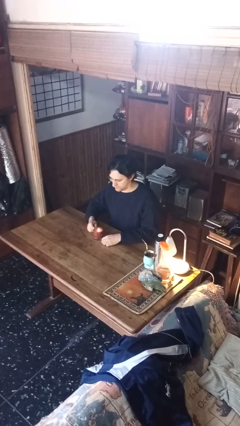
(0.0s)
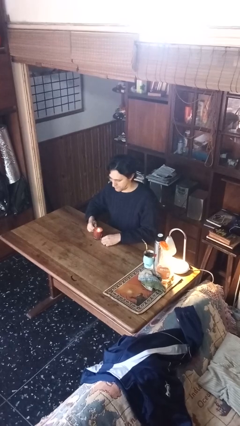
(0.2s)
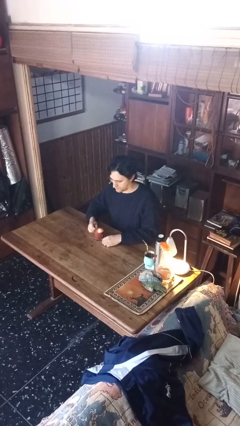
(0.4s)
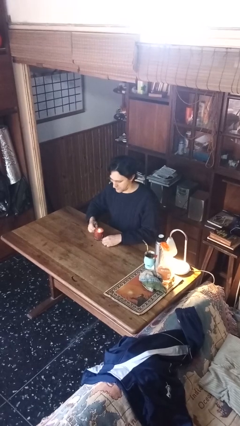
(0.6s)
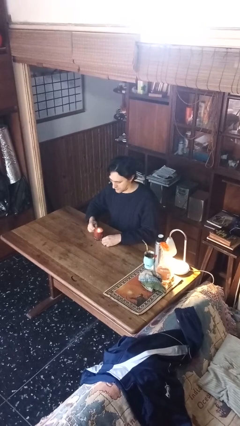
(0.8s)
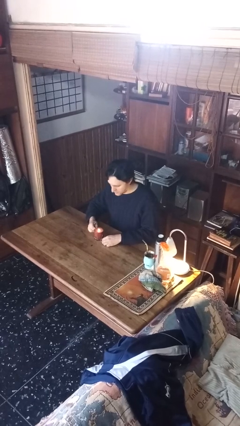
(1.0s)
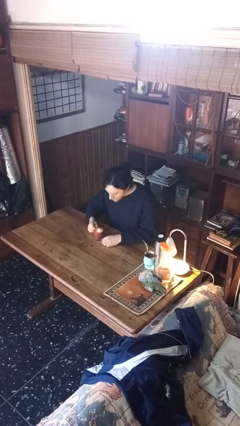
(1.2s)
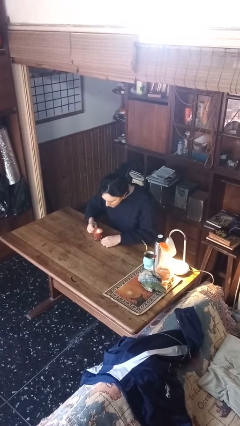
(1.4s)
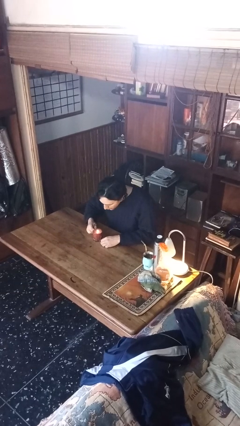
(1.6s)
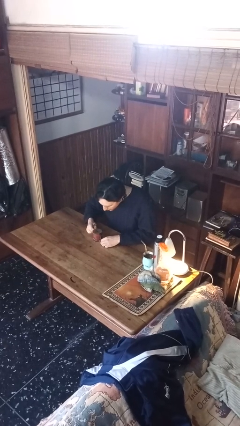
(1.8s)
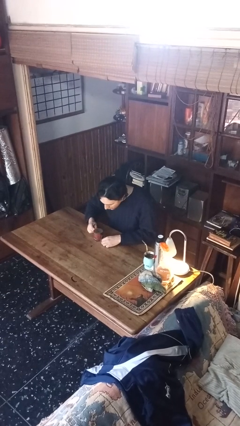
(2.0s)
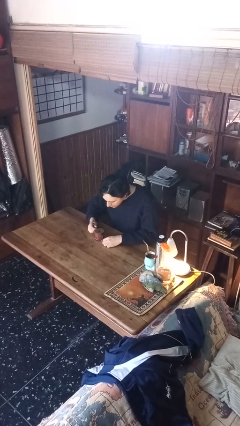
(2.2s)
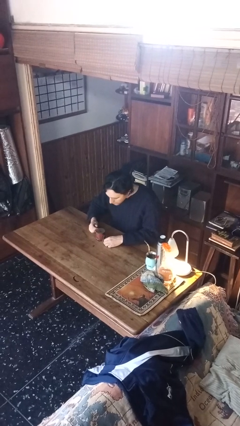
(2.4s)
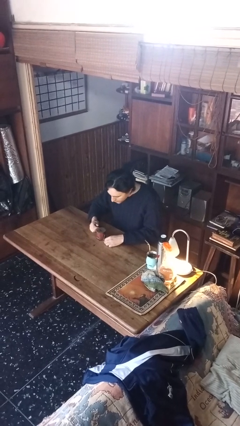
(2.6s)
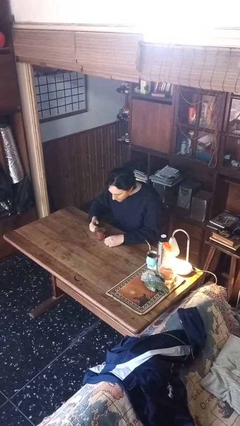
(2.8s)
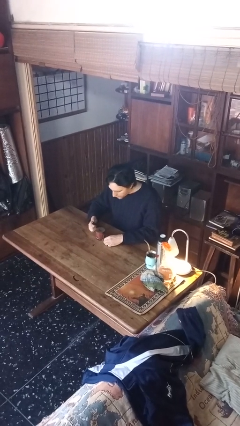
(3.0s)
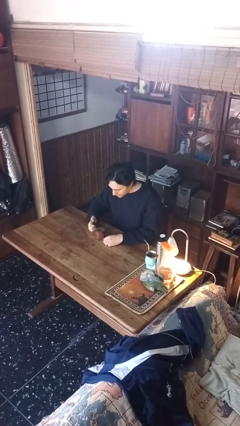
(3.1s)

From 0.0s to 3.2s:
person extinguishes candle

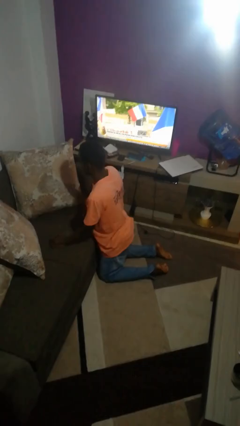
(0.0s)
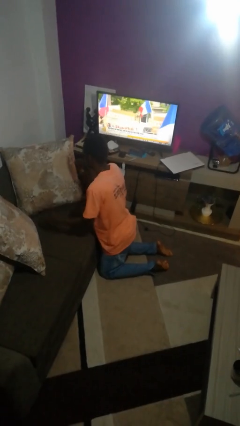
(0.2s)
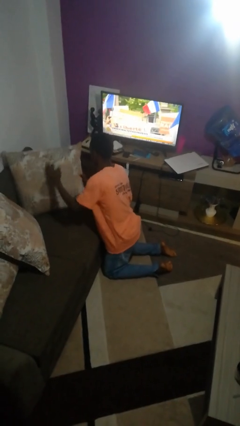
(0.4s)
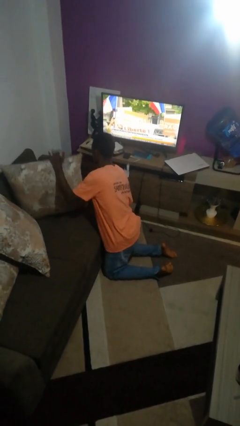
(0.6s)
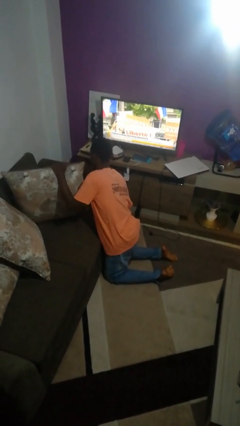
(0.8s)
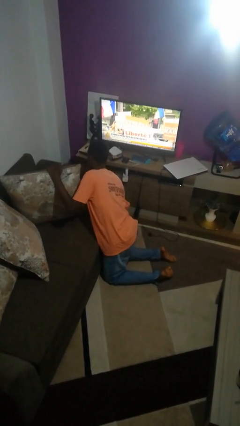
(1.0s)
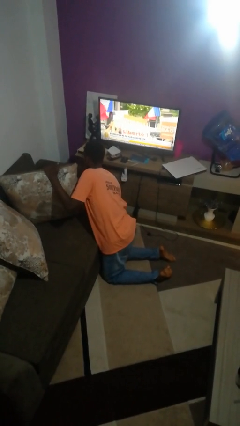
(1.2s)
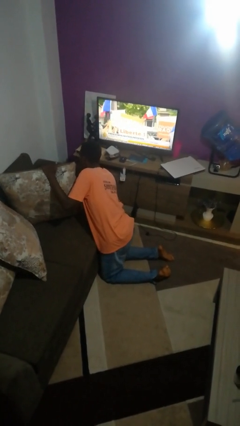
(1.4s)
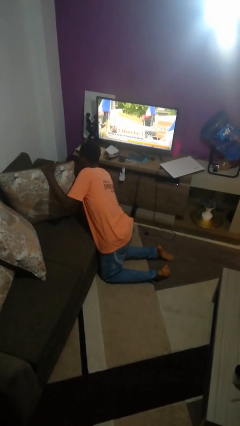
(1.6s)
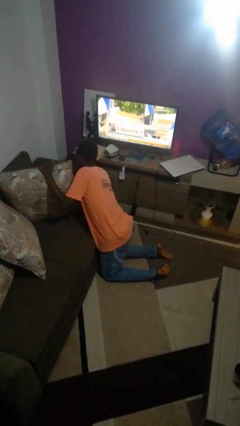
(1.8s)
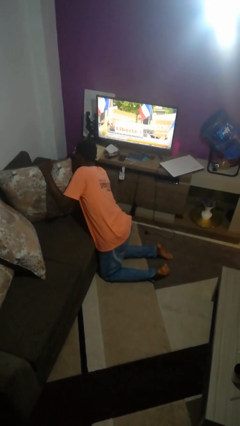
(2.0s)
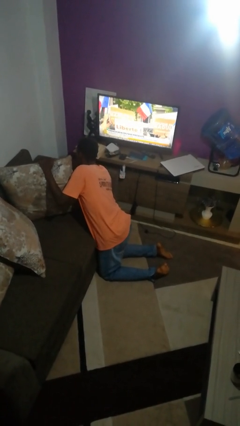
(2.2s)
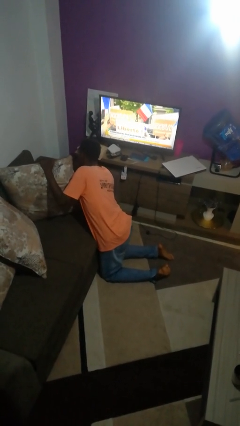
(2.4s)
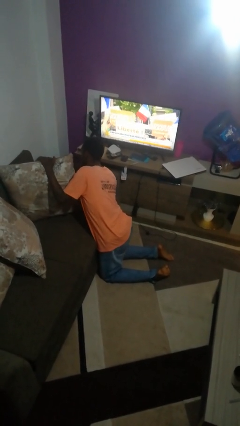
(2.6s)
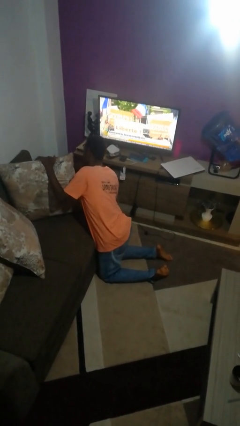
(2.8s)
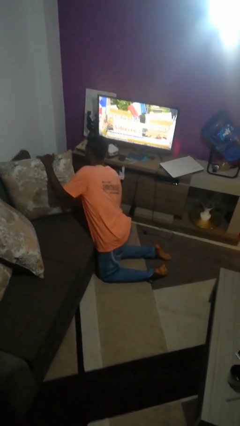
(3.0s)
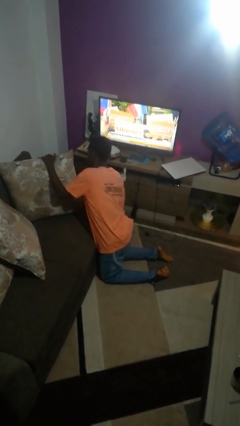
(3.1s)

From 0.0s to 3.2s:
person searches in couch

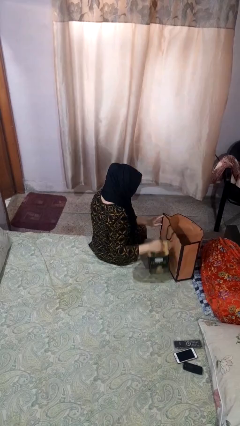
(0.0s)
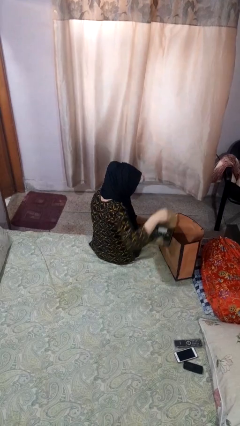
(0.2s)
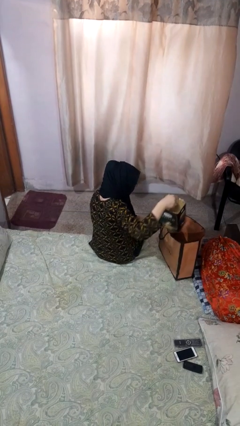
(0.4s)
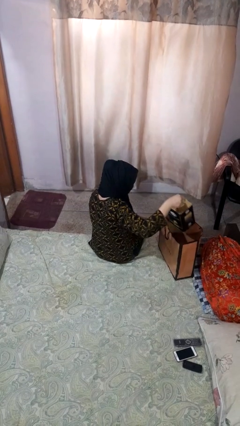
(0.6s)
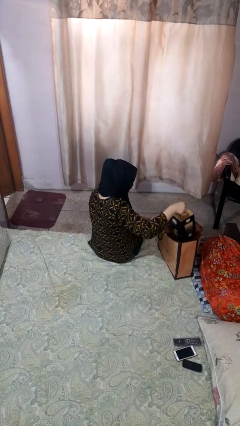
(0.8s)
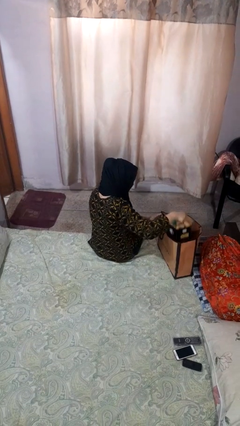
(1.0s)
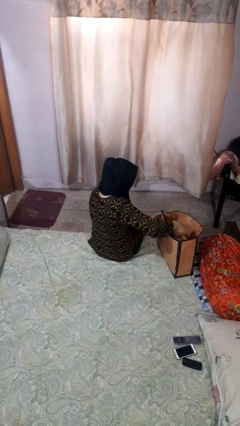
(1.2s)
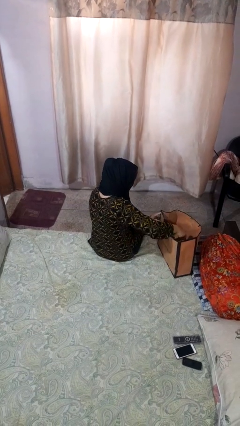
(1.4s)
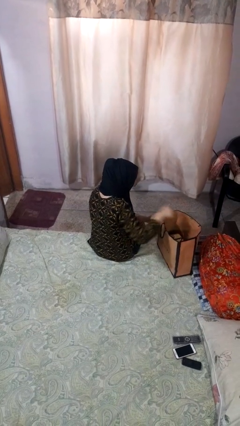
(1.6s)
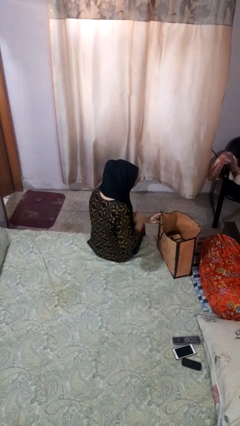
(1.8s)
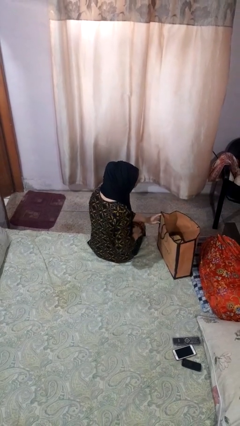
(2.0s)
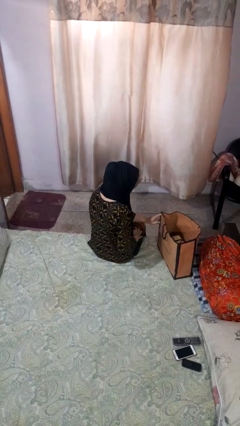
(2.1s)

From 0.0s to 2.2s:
person puts object into bag

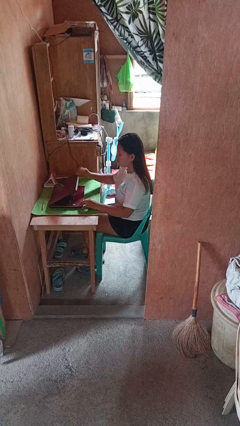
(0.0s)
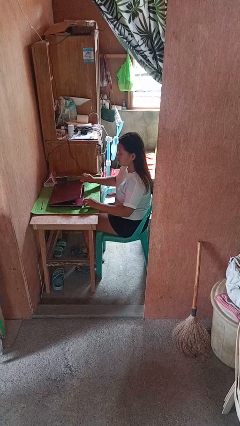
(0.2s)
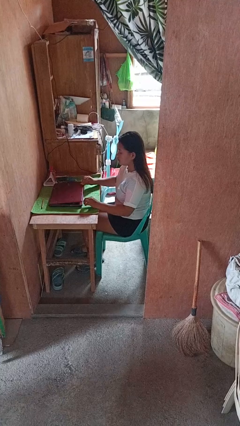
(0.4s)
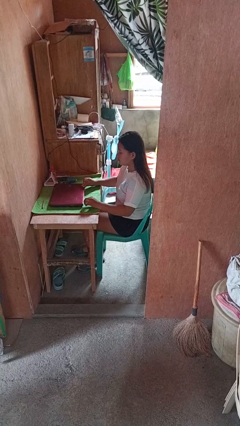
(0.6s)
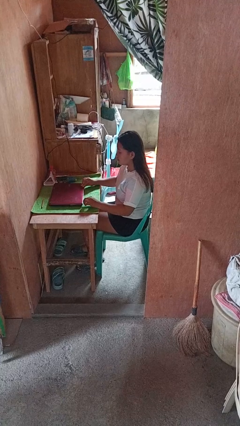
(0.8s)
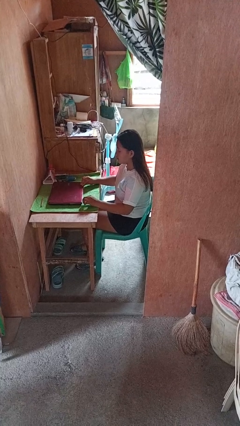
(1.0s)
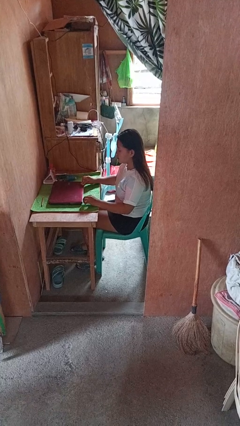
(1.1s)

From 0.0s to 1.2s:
person closes laptop

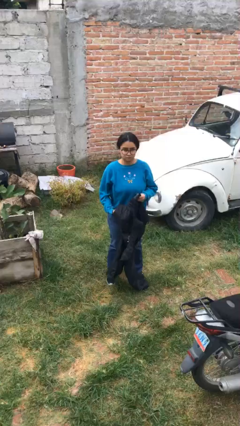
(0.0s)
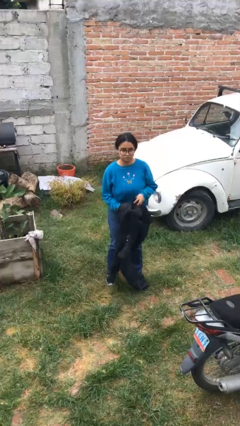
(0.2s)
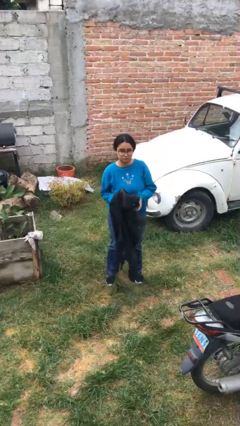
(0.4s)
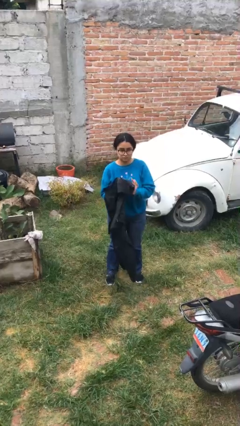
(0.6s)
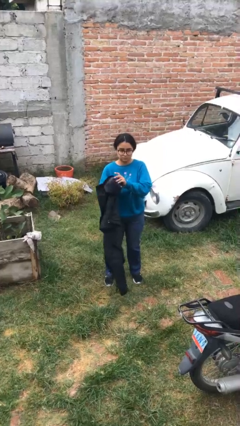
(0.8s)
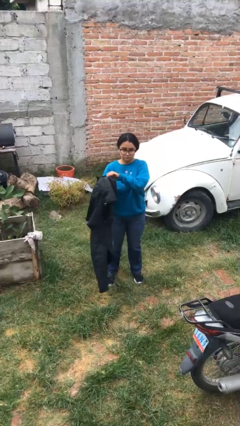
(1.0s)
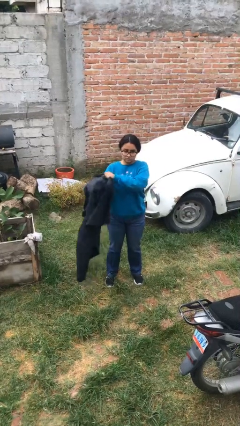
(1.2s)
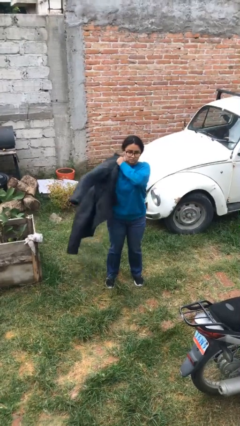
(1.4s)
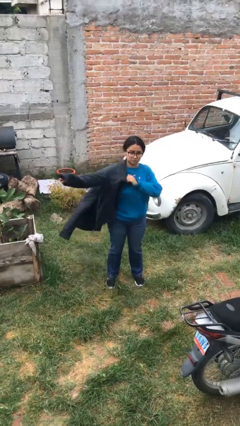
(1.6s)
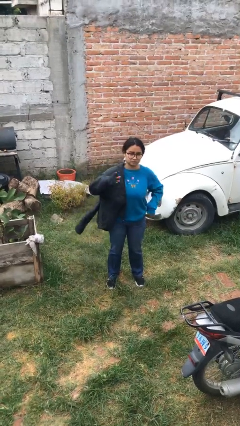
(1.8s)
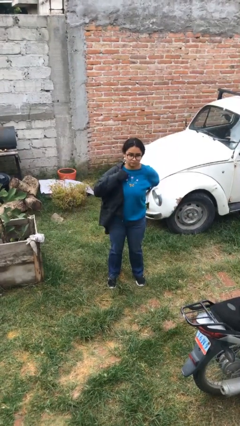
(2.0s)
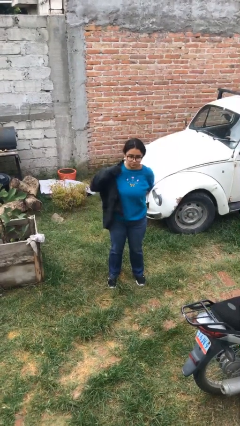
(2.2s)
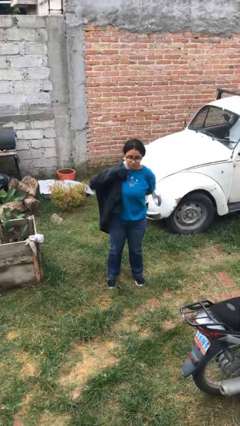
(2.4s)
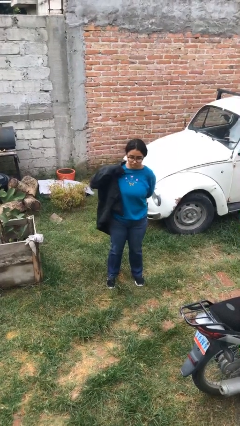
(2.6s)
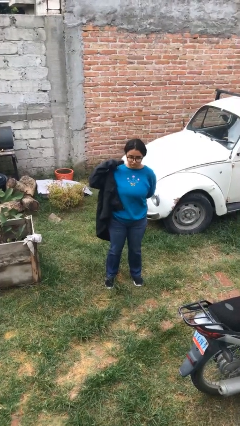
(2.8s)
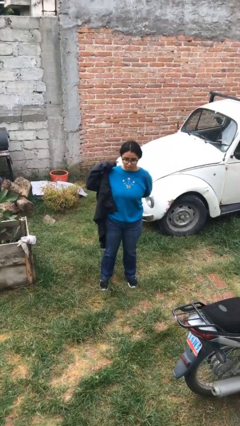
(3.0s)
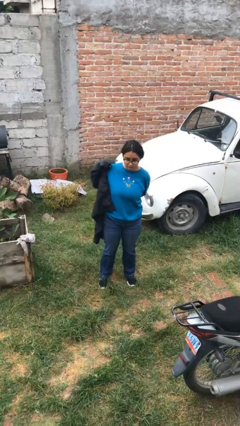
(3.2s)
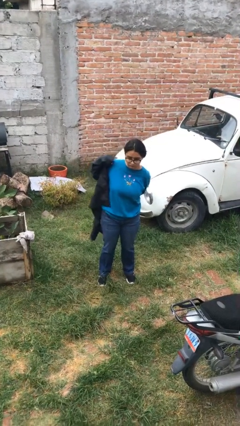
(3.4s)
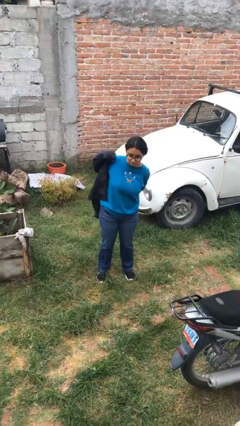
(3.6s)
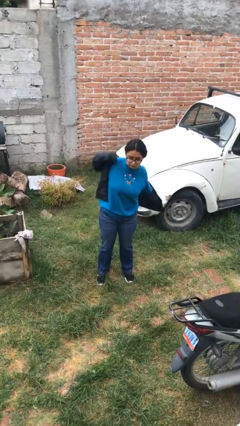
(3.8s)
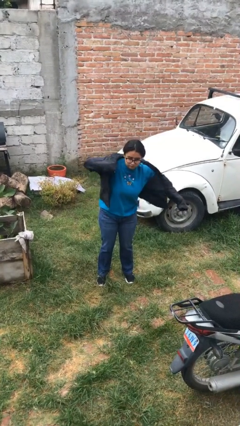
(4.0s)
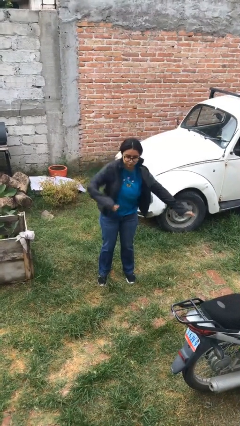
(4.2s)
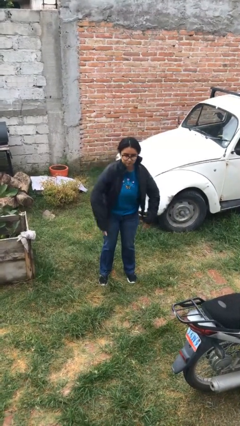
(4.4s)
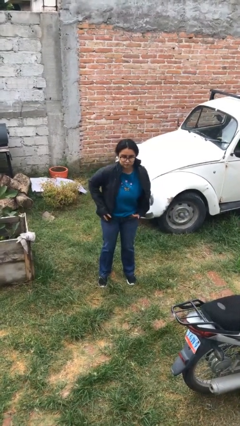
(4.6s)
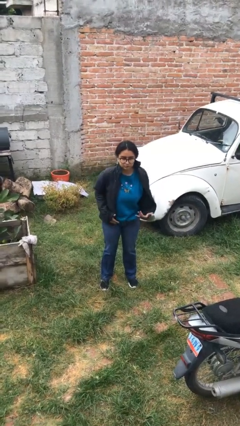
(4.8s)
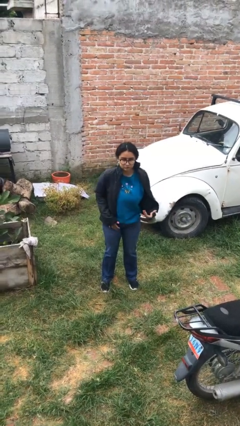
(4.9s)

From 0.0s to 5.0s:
person puts on jacket

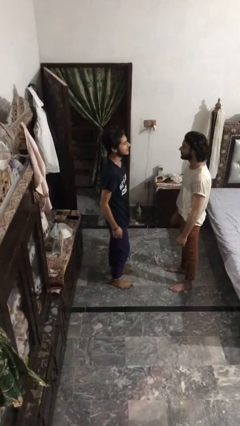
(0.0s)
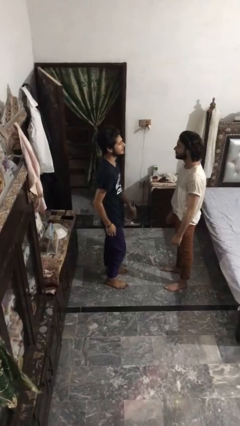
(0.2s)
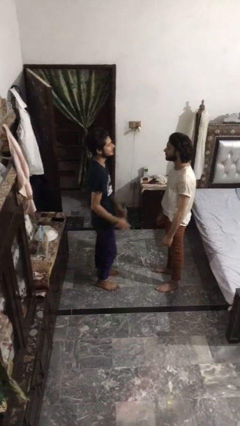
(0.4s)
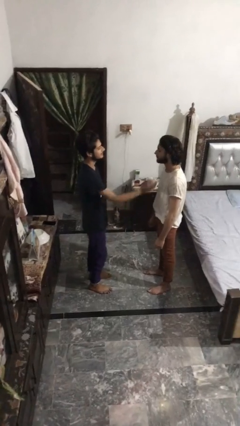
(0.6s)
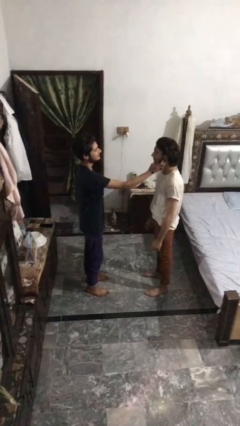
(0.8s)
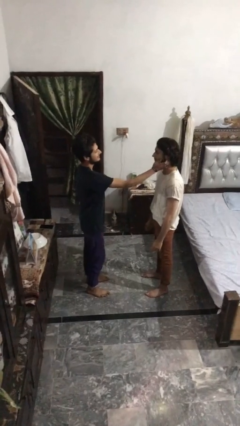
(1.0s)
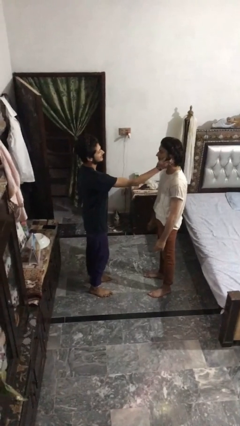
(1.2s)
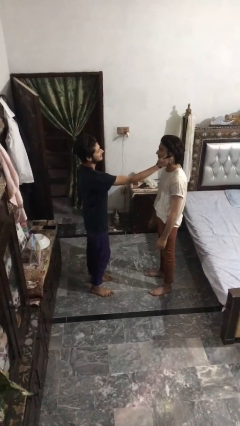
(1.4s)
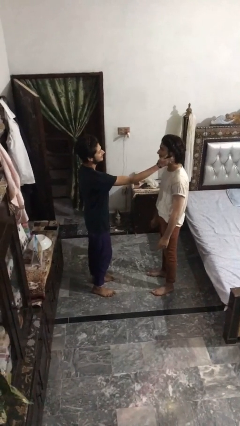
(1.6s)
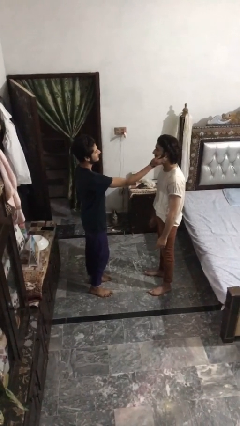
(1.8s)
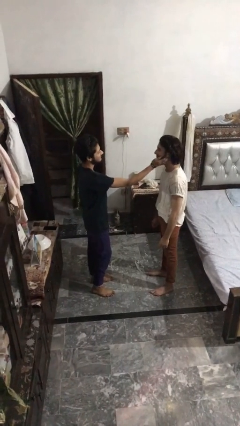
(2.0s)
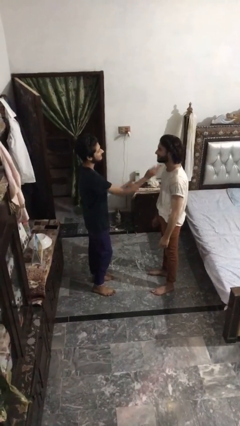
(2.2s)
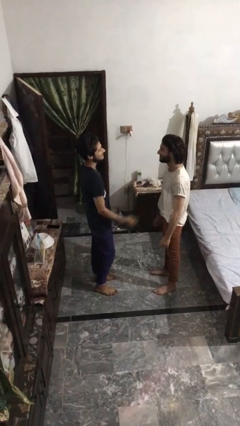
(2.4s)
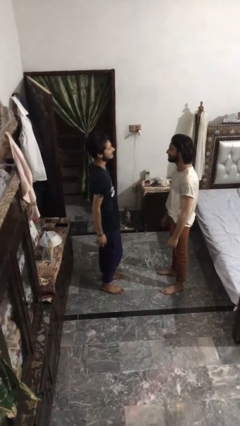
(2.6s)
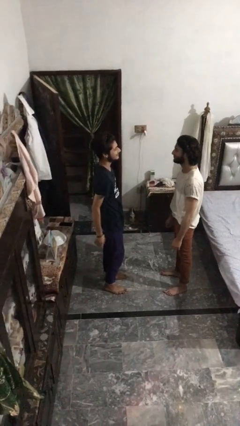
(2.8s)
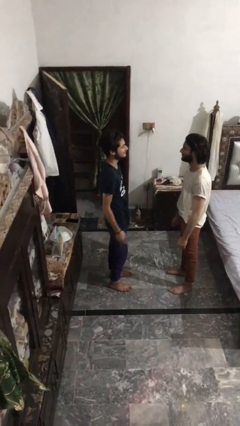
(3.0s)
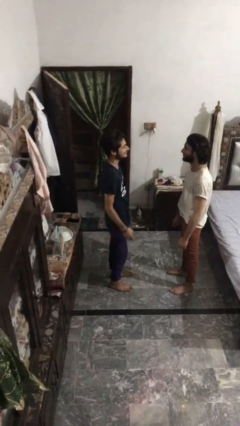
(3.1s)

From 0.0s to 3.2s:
person touches face of person
